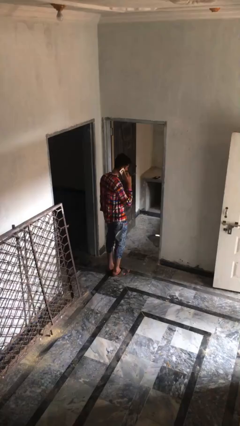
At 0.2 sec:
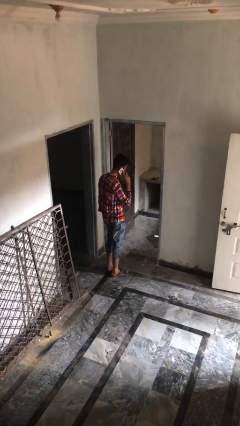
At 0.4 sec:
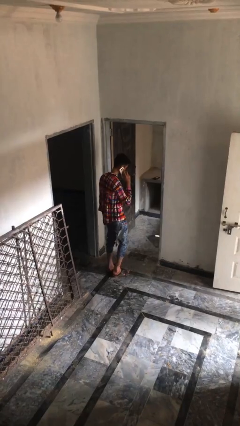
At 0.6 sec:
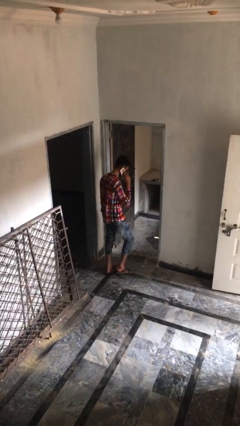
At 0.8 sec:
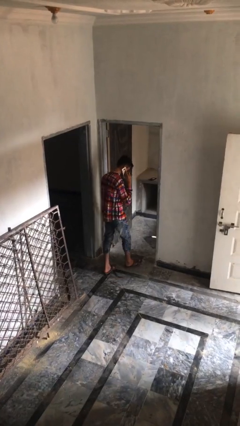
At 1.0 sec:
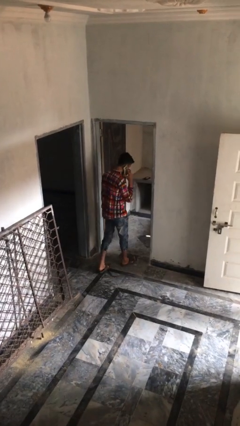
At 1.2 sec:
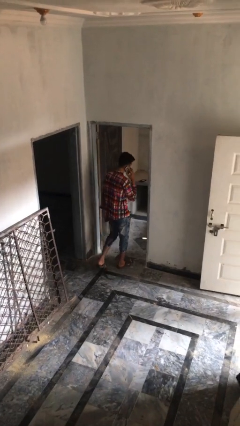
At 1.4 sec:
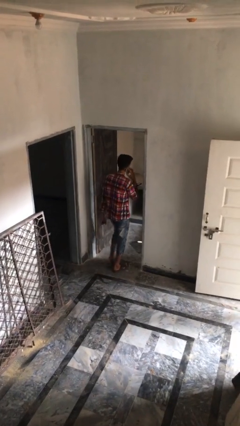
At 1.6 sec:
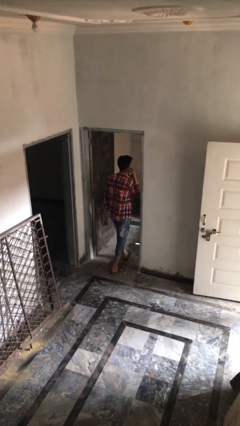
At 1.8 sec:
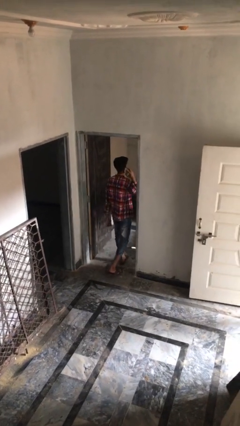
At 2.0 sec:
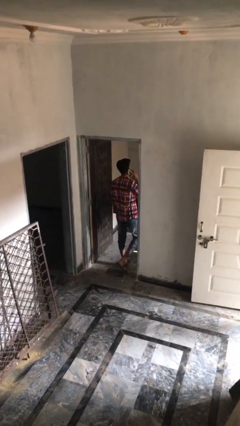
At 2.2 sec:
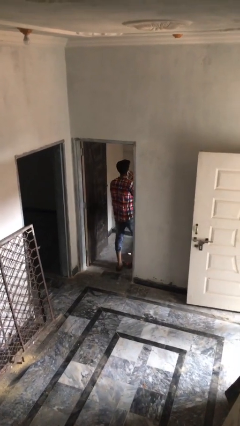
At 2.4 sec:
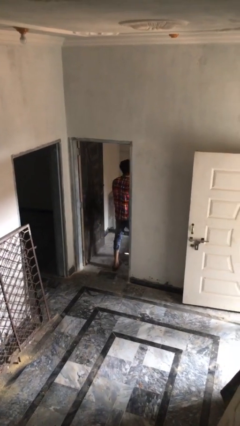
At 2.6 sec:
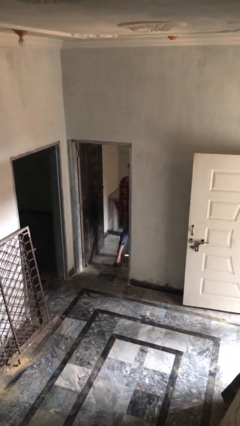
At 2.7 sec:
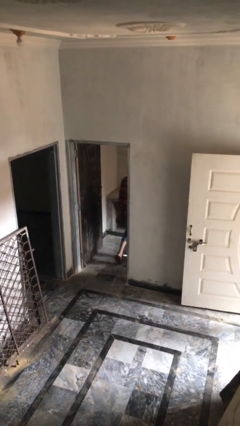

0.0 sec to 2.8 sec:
person exits scene through structure

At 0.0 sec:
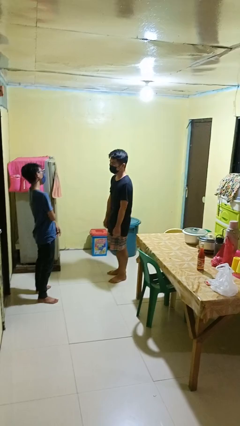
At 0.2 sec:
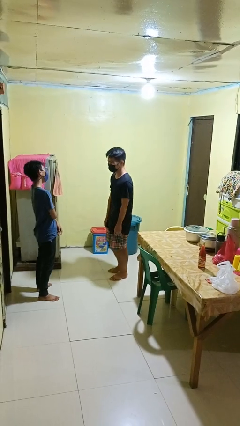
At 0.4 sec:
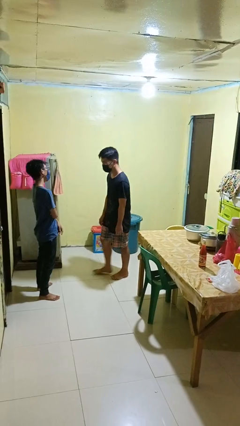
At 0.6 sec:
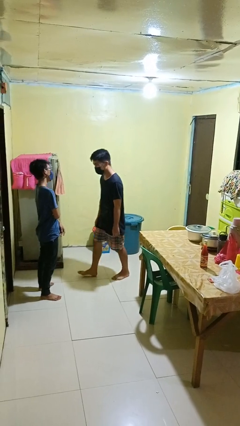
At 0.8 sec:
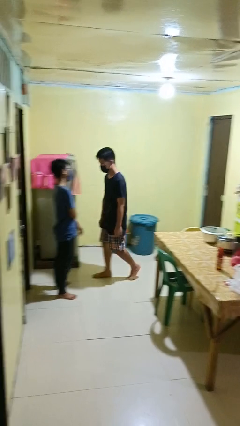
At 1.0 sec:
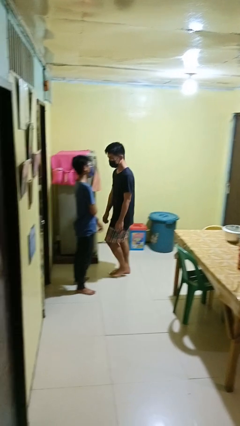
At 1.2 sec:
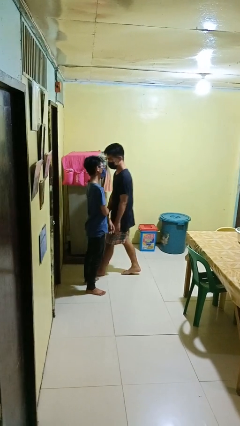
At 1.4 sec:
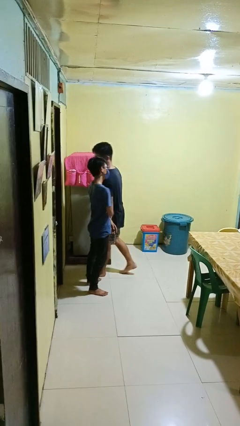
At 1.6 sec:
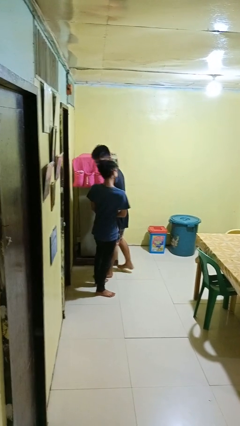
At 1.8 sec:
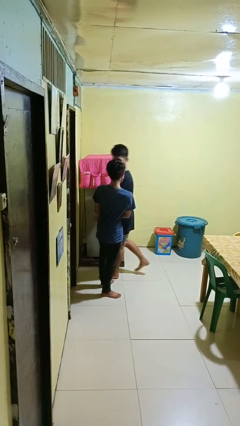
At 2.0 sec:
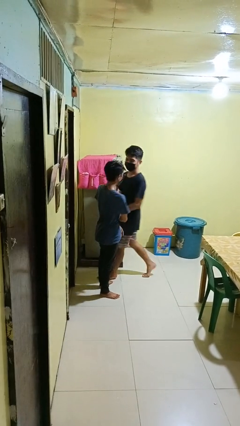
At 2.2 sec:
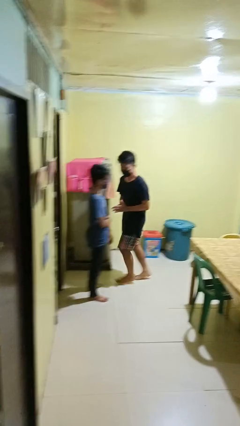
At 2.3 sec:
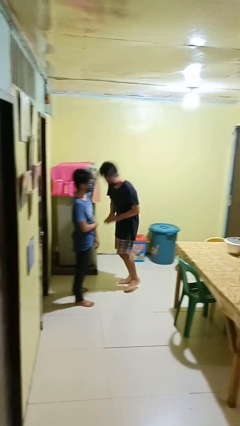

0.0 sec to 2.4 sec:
person bumps into person

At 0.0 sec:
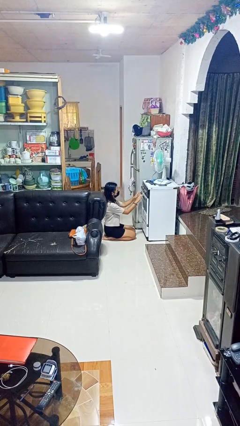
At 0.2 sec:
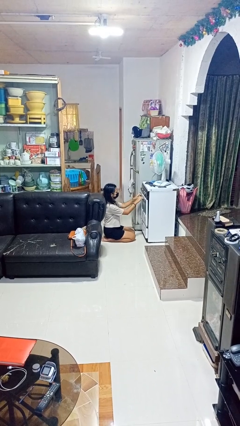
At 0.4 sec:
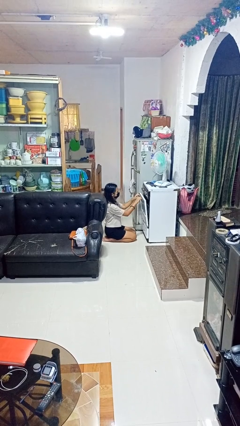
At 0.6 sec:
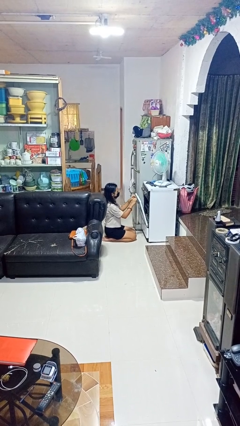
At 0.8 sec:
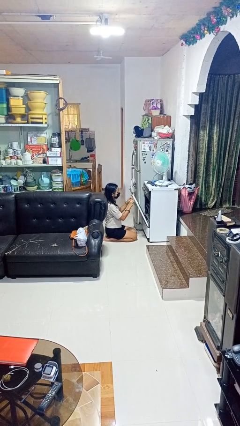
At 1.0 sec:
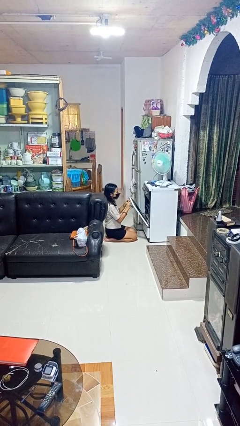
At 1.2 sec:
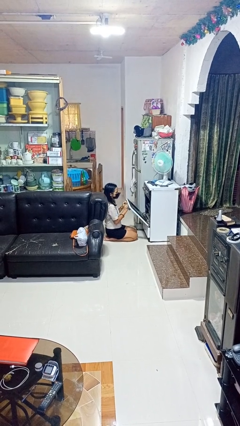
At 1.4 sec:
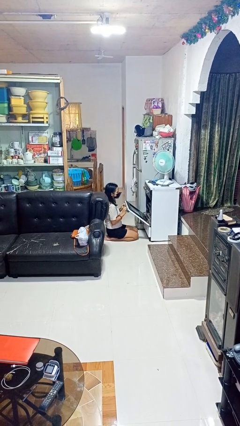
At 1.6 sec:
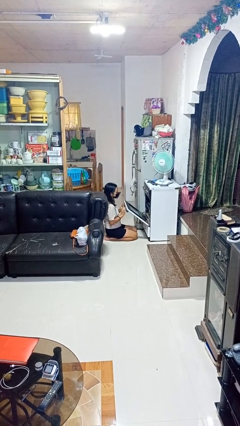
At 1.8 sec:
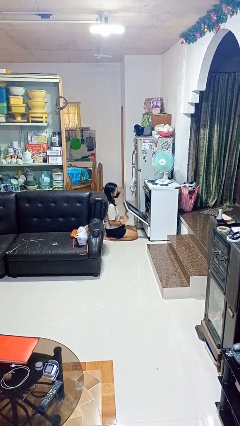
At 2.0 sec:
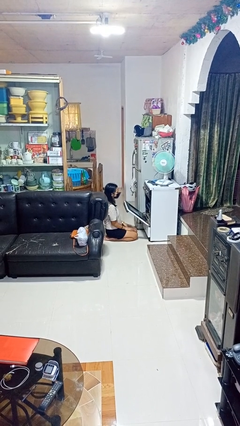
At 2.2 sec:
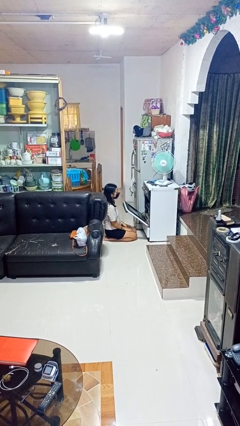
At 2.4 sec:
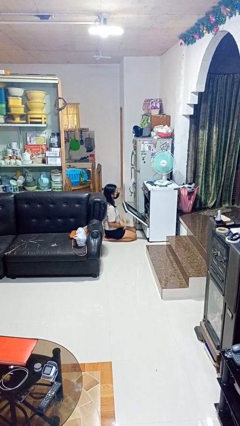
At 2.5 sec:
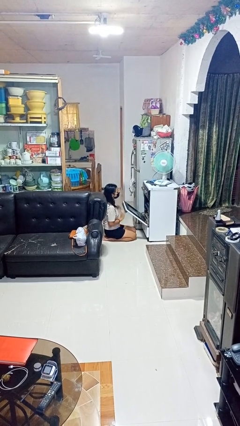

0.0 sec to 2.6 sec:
person opens oven door

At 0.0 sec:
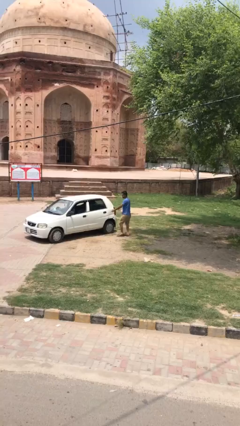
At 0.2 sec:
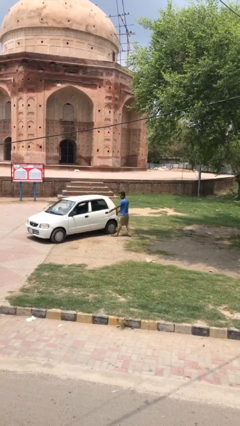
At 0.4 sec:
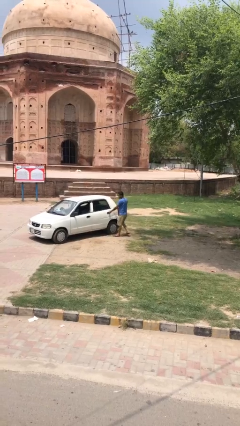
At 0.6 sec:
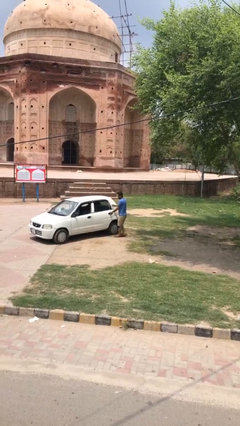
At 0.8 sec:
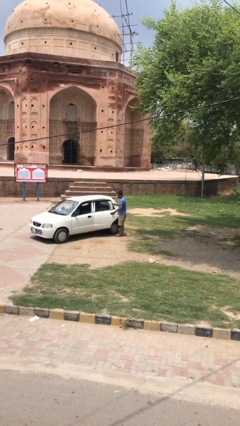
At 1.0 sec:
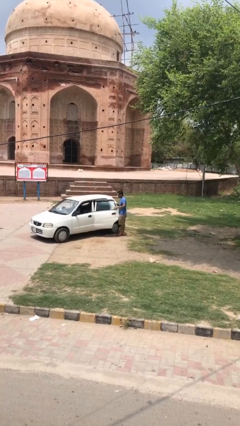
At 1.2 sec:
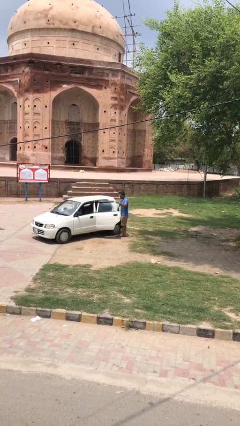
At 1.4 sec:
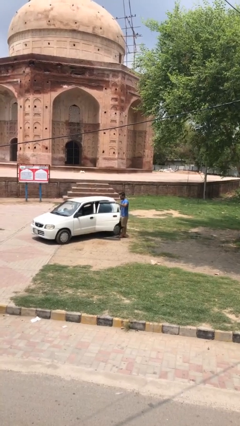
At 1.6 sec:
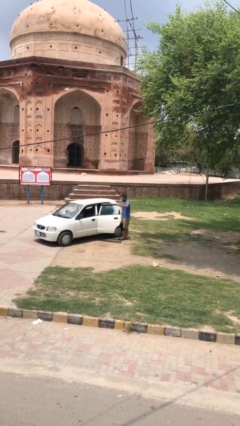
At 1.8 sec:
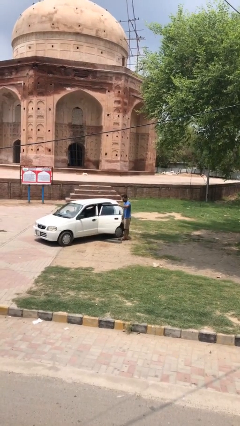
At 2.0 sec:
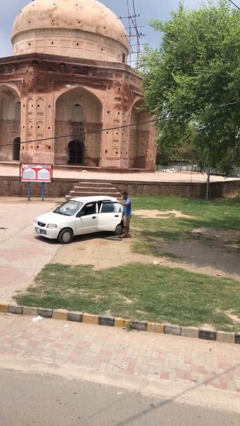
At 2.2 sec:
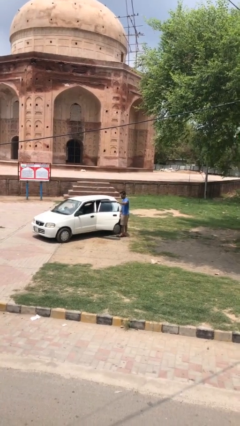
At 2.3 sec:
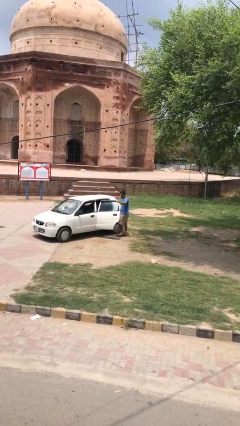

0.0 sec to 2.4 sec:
person opens car door

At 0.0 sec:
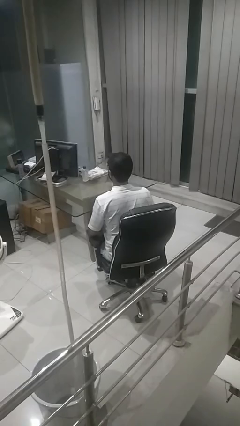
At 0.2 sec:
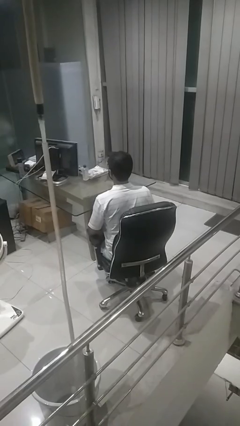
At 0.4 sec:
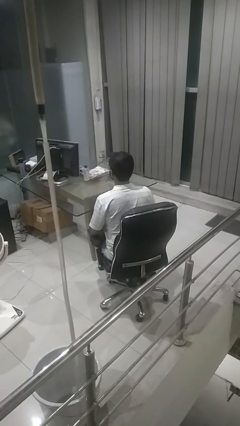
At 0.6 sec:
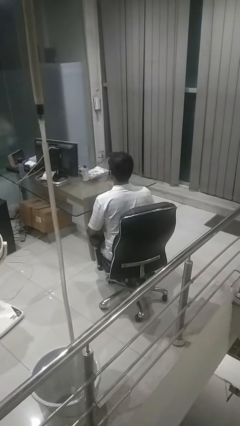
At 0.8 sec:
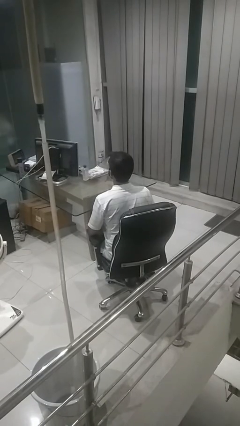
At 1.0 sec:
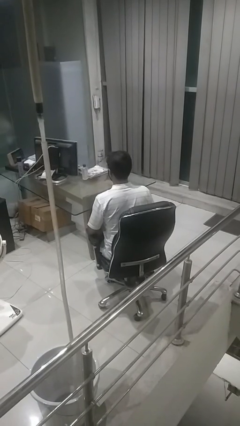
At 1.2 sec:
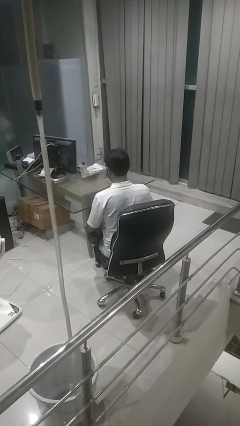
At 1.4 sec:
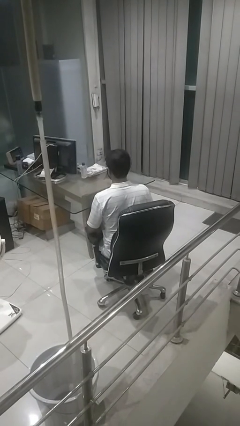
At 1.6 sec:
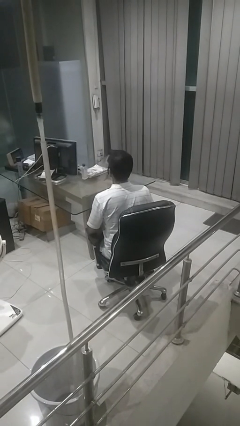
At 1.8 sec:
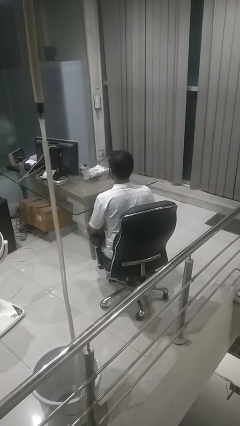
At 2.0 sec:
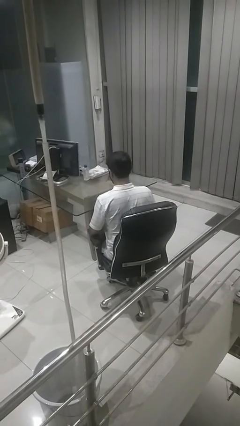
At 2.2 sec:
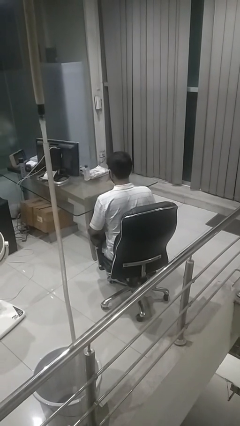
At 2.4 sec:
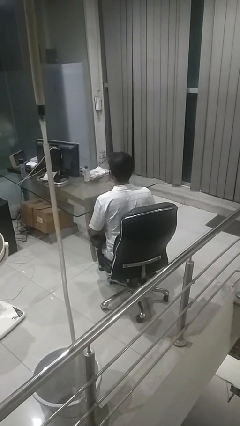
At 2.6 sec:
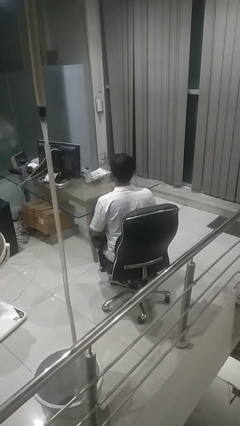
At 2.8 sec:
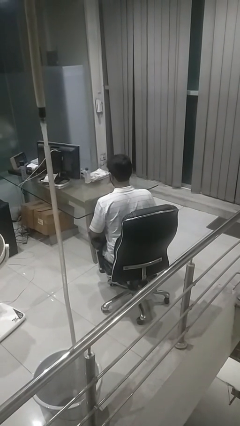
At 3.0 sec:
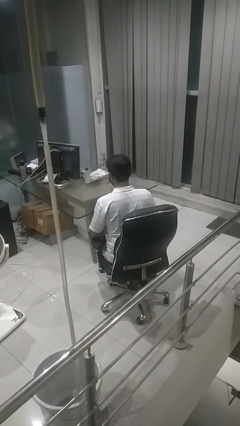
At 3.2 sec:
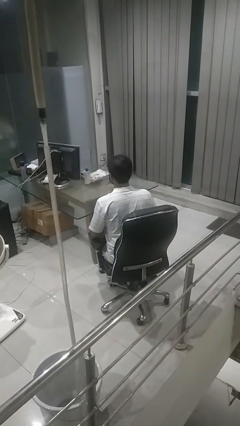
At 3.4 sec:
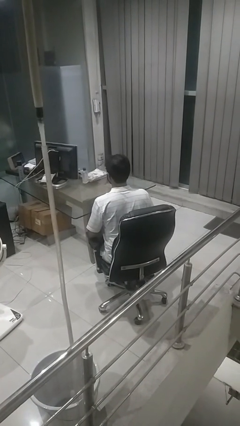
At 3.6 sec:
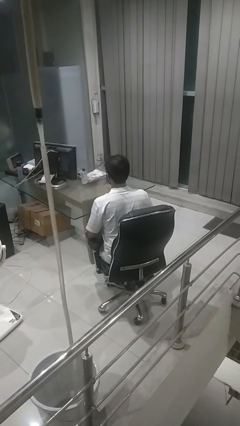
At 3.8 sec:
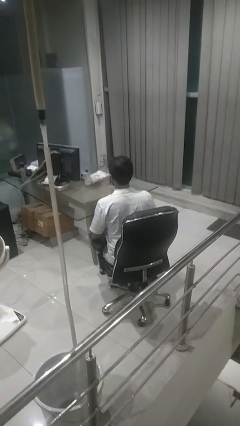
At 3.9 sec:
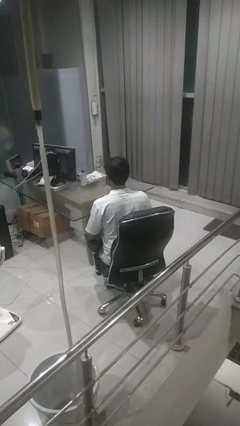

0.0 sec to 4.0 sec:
person nods head

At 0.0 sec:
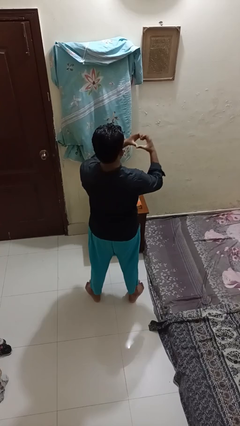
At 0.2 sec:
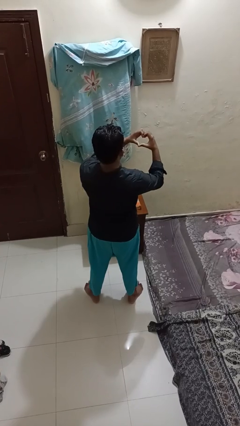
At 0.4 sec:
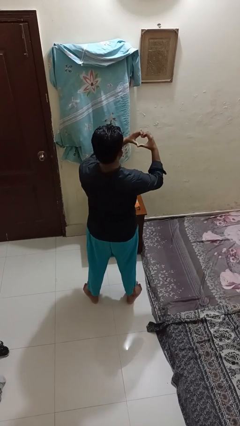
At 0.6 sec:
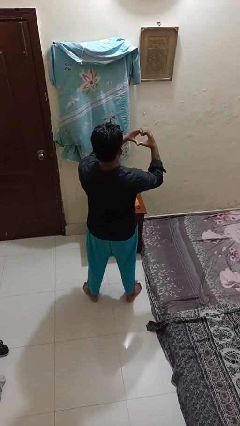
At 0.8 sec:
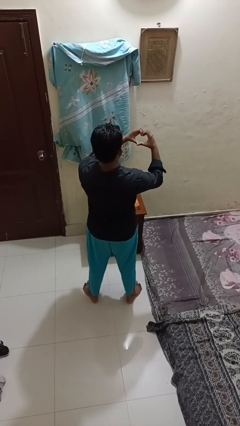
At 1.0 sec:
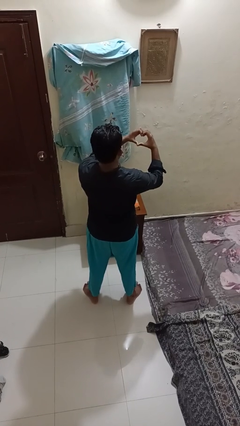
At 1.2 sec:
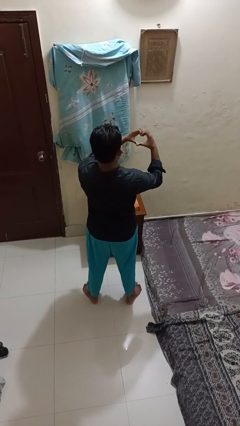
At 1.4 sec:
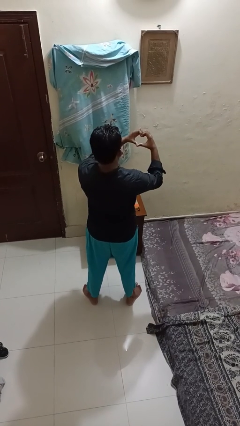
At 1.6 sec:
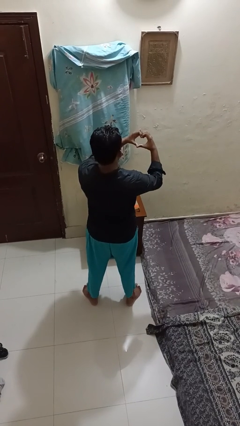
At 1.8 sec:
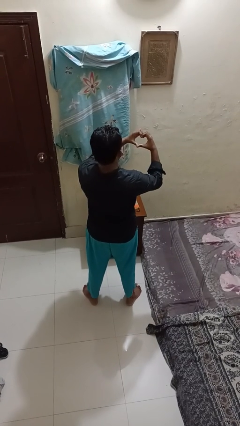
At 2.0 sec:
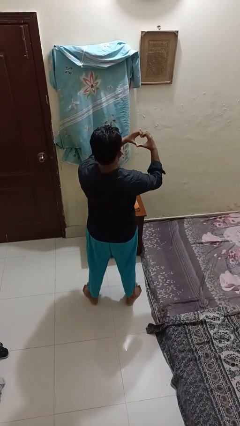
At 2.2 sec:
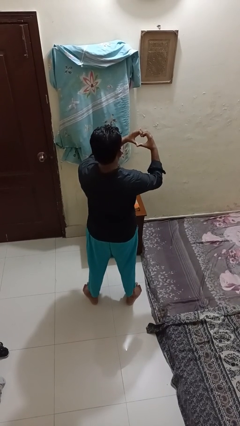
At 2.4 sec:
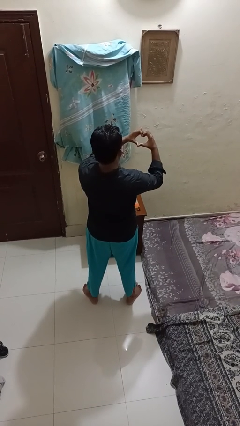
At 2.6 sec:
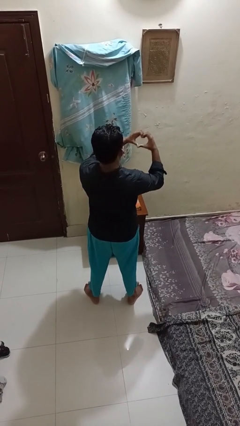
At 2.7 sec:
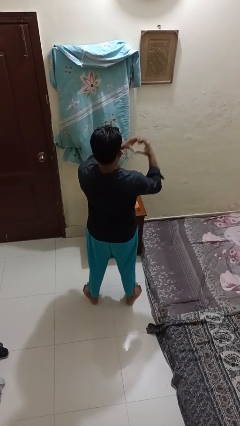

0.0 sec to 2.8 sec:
person gestures heart
